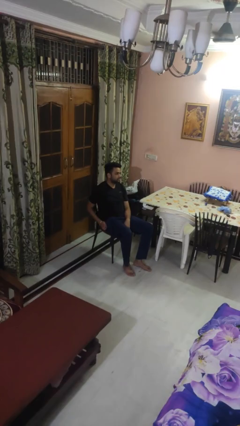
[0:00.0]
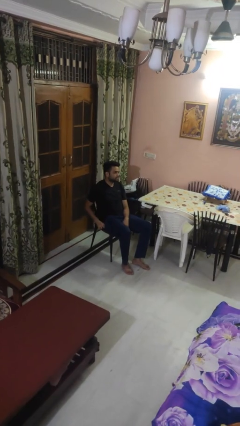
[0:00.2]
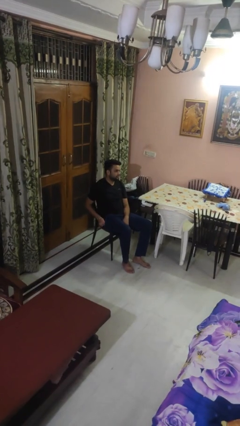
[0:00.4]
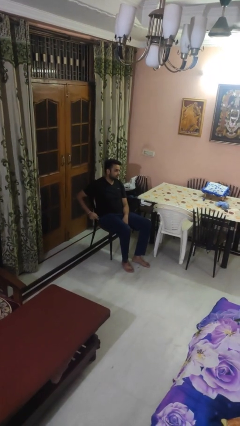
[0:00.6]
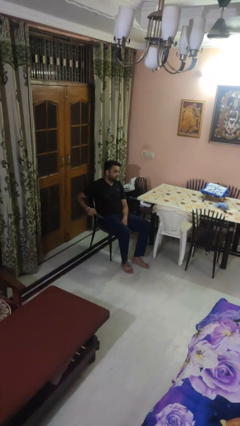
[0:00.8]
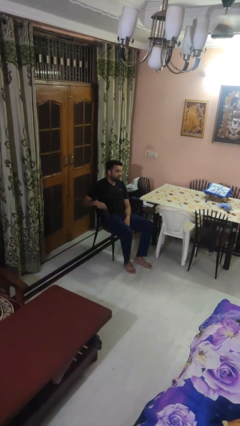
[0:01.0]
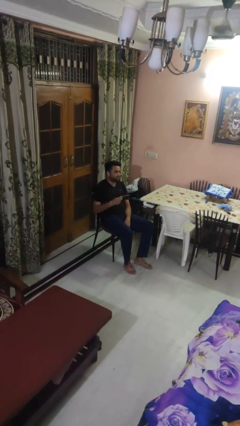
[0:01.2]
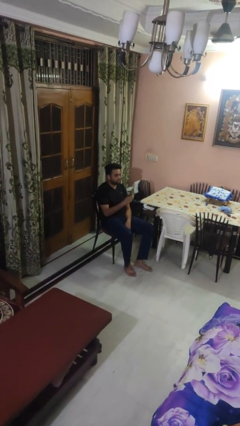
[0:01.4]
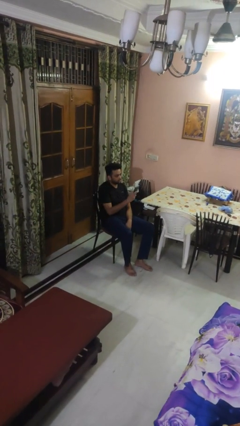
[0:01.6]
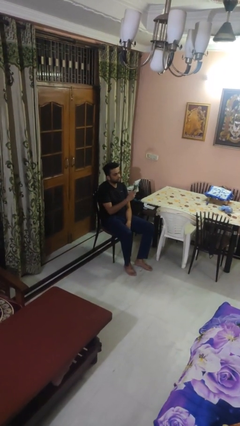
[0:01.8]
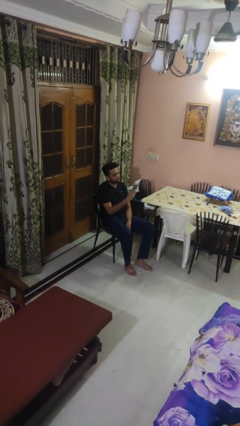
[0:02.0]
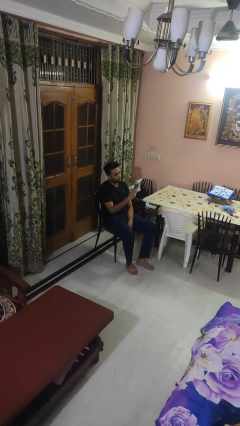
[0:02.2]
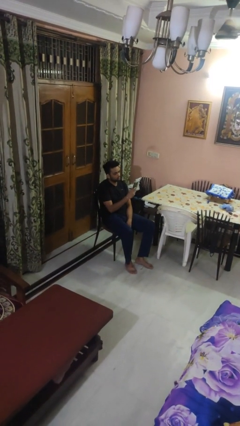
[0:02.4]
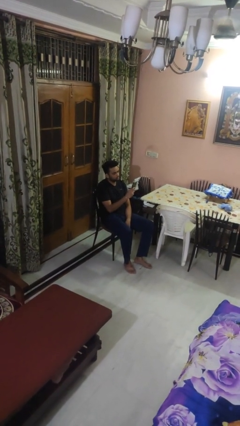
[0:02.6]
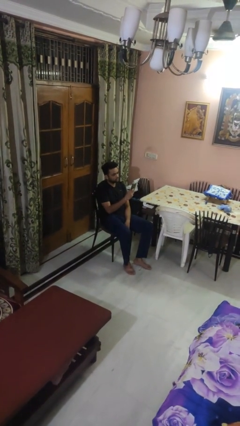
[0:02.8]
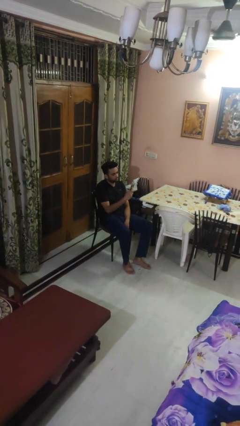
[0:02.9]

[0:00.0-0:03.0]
person takes phone from pocket

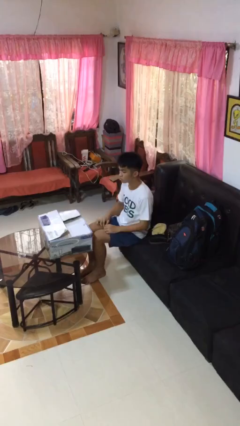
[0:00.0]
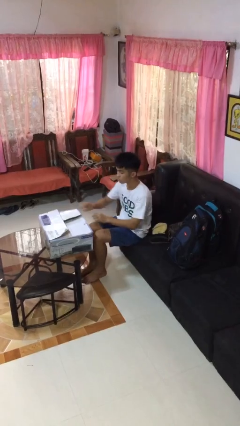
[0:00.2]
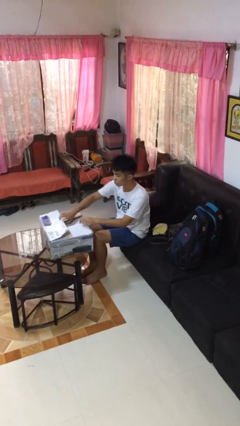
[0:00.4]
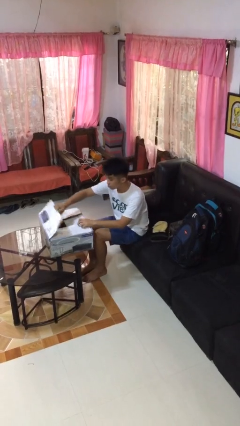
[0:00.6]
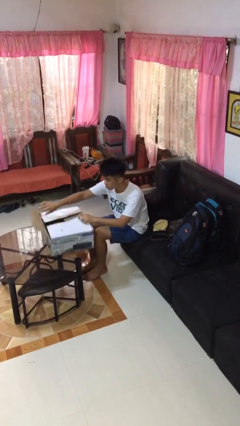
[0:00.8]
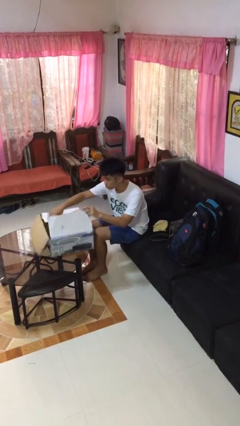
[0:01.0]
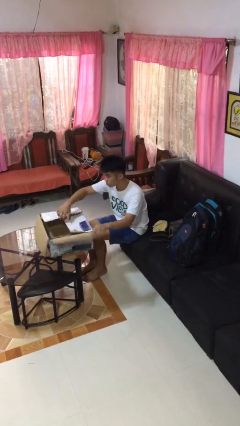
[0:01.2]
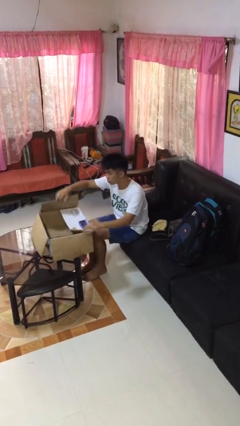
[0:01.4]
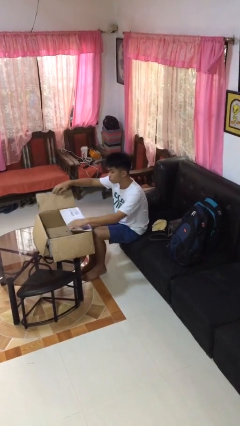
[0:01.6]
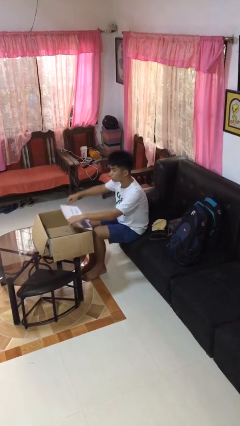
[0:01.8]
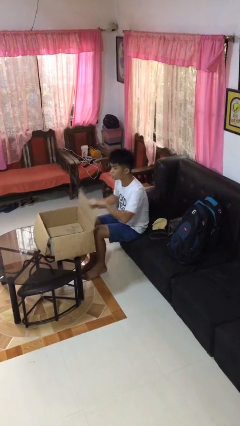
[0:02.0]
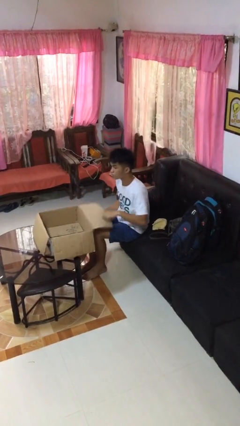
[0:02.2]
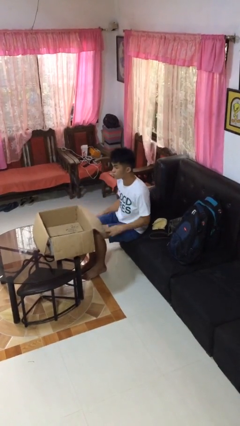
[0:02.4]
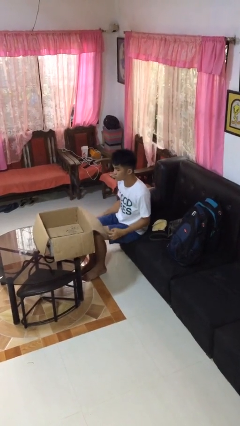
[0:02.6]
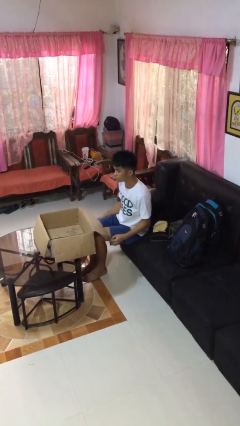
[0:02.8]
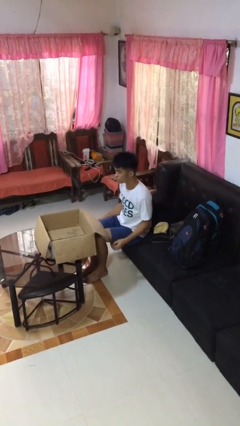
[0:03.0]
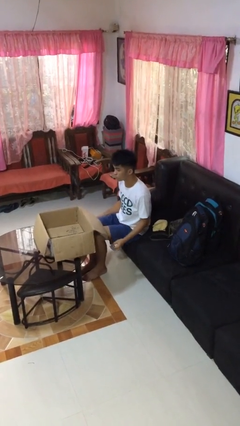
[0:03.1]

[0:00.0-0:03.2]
person opens box

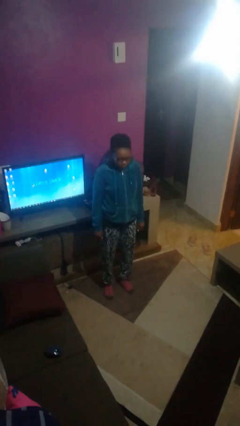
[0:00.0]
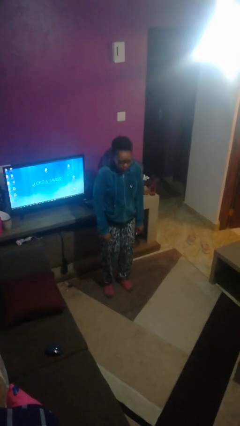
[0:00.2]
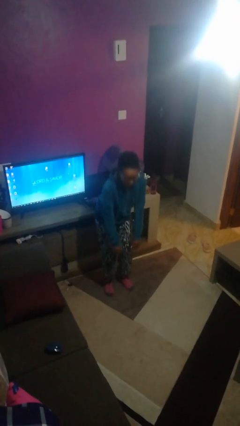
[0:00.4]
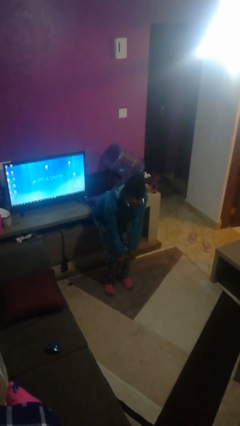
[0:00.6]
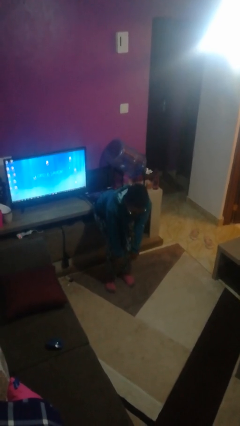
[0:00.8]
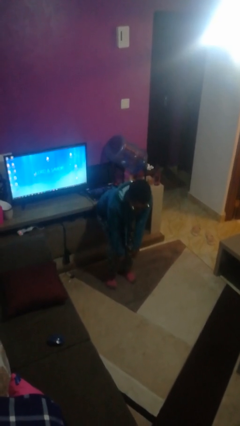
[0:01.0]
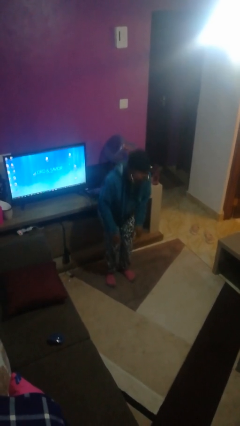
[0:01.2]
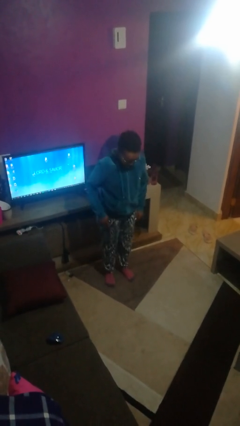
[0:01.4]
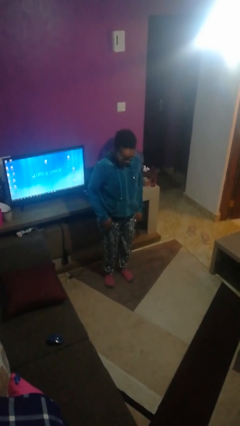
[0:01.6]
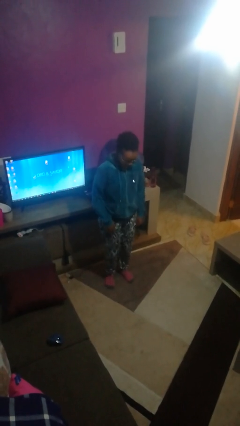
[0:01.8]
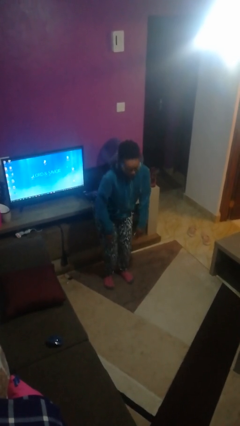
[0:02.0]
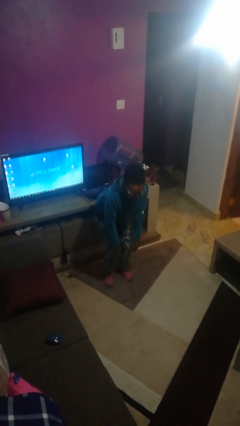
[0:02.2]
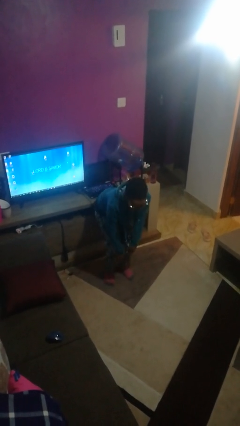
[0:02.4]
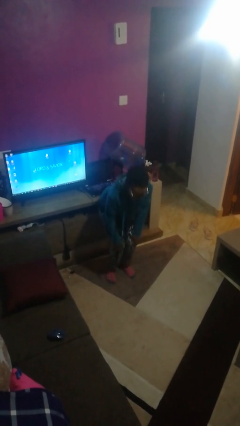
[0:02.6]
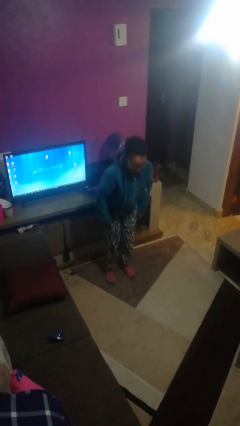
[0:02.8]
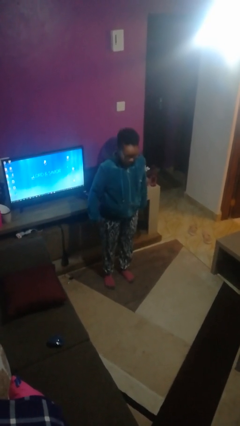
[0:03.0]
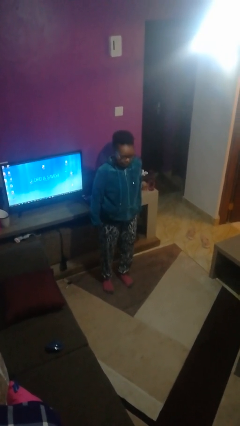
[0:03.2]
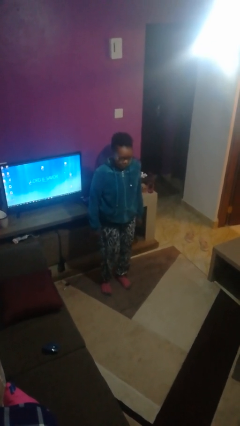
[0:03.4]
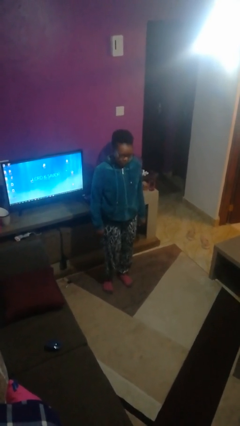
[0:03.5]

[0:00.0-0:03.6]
person dances in place

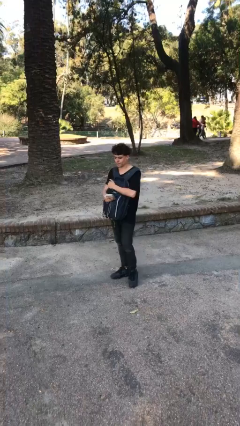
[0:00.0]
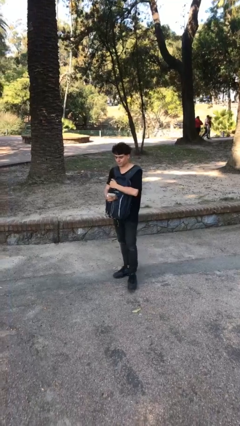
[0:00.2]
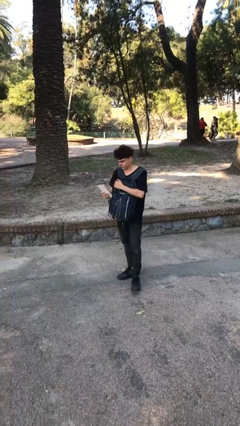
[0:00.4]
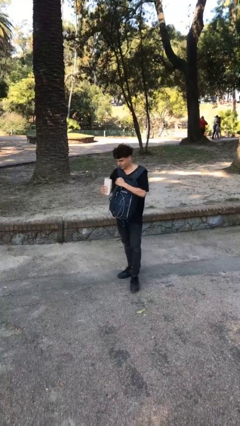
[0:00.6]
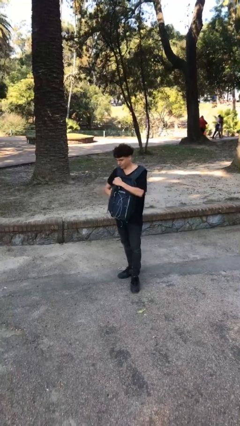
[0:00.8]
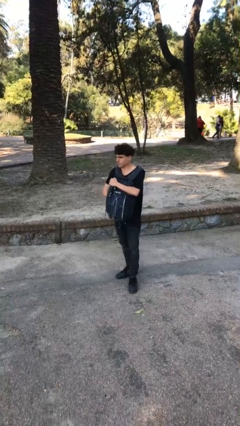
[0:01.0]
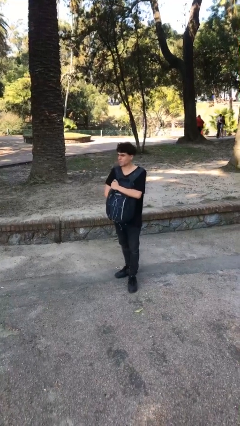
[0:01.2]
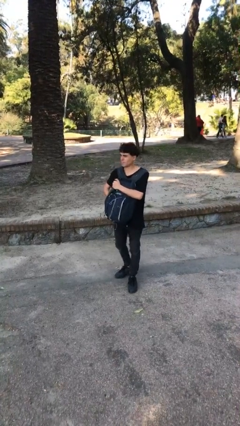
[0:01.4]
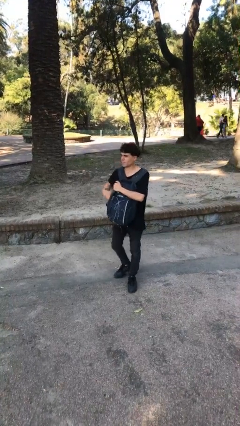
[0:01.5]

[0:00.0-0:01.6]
person puts object into backpack

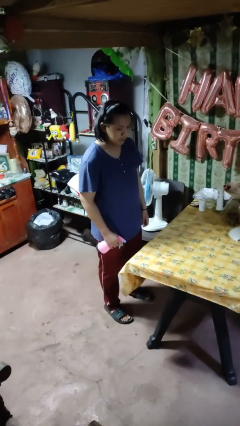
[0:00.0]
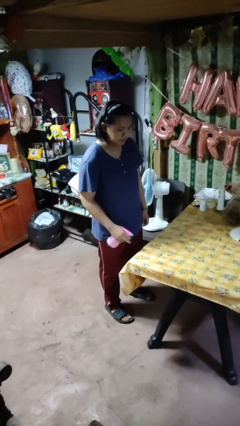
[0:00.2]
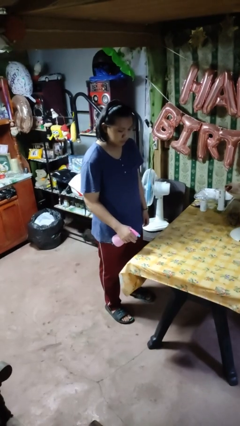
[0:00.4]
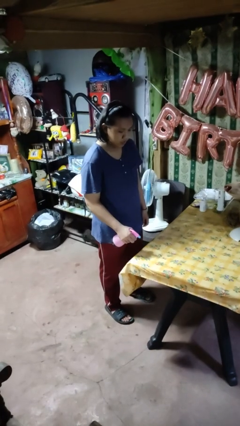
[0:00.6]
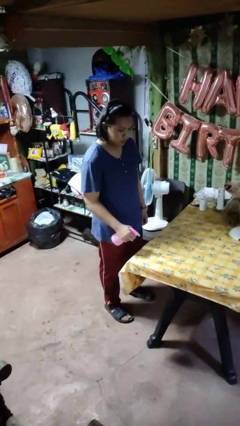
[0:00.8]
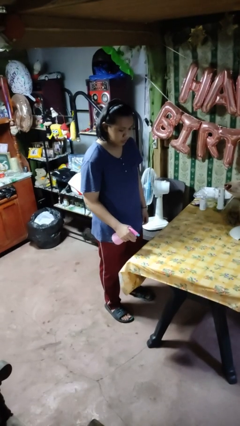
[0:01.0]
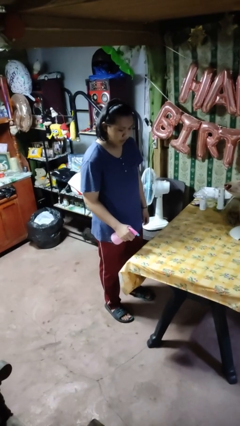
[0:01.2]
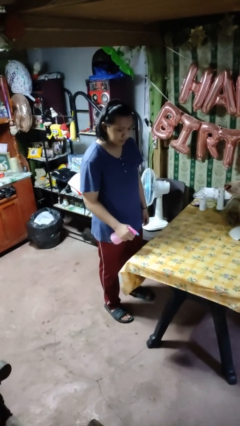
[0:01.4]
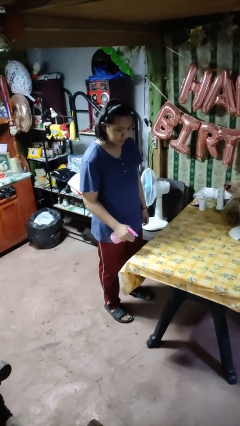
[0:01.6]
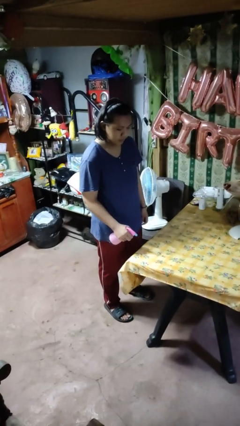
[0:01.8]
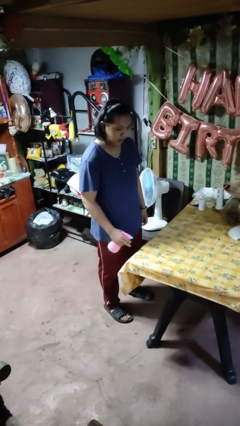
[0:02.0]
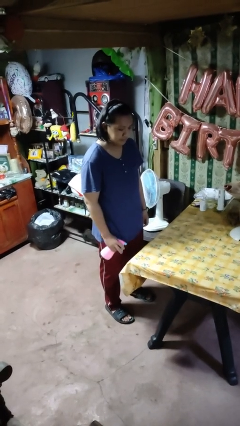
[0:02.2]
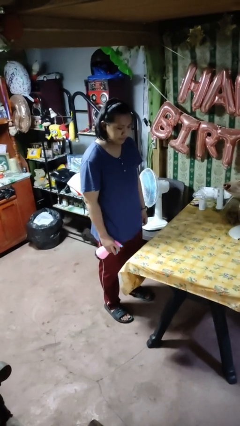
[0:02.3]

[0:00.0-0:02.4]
person sprays from bottle

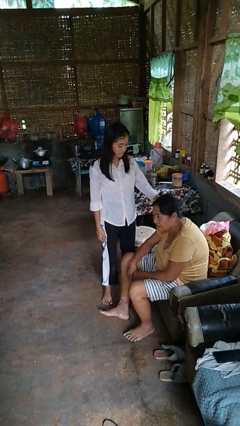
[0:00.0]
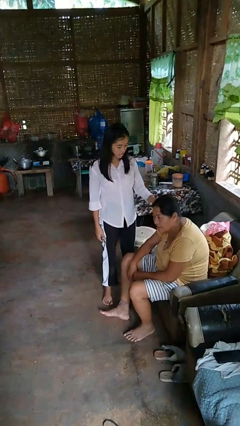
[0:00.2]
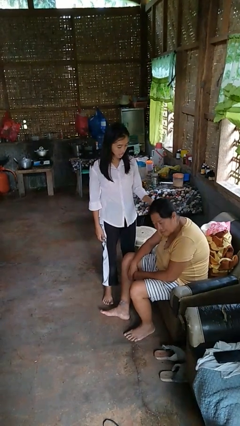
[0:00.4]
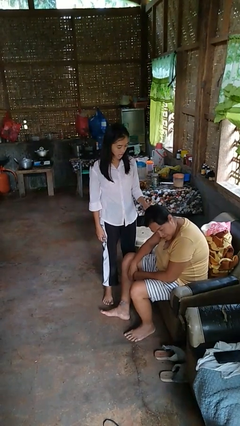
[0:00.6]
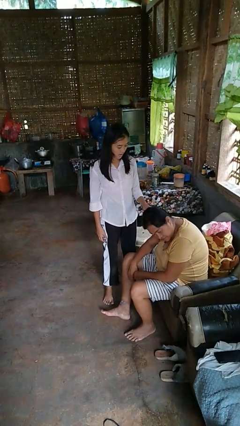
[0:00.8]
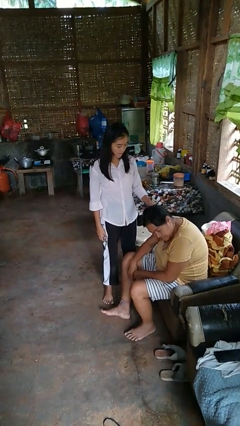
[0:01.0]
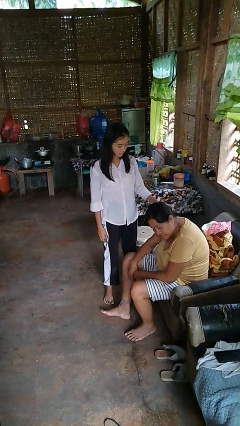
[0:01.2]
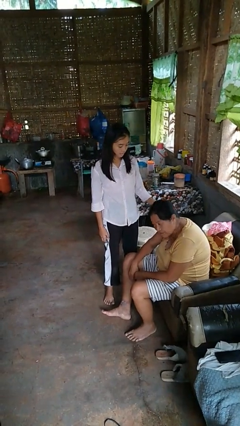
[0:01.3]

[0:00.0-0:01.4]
person grabs person by hair

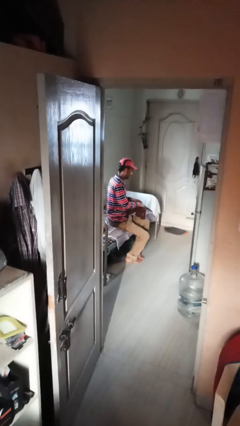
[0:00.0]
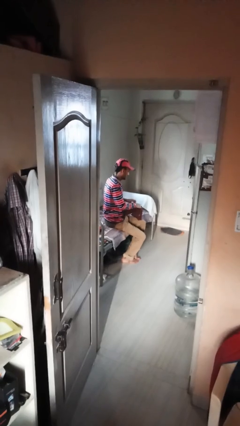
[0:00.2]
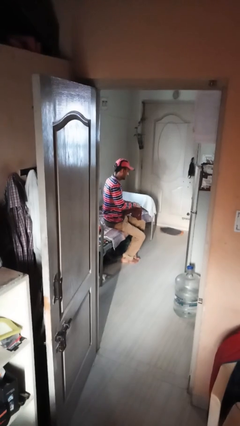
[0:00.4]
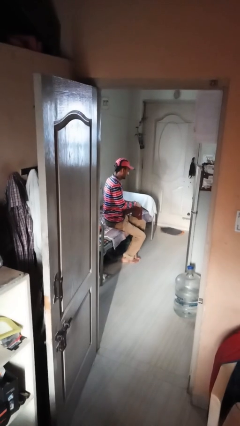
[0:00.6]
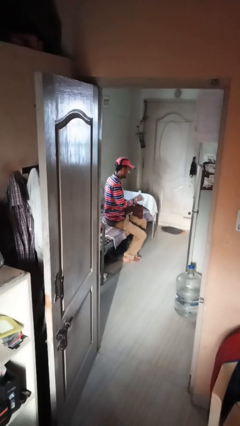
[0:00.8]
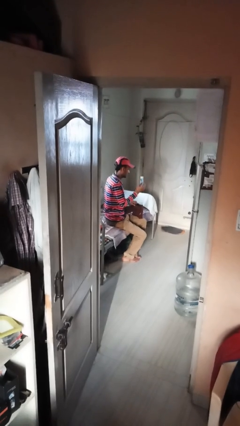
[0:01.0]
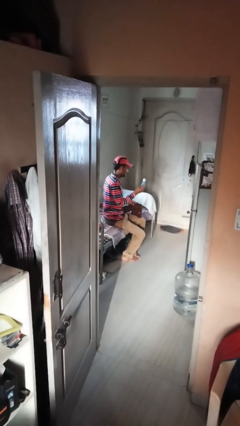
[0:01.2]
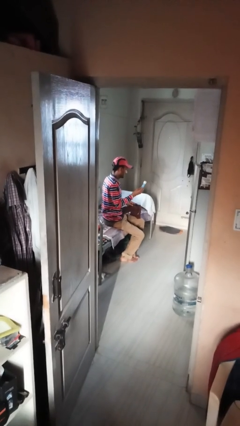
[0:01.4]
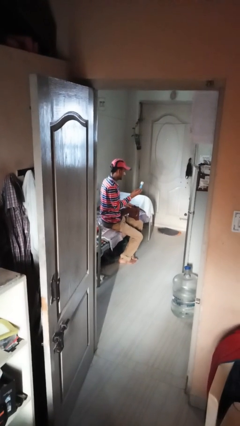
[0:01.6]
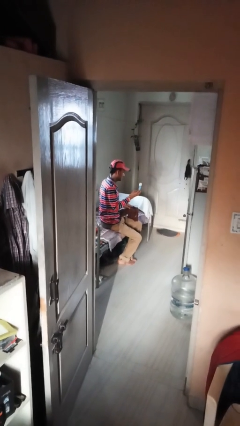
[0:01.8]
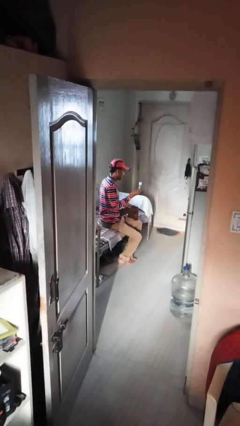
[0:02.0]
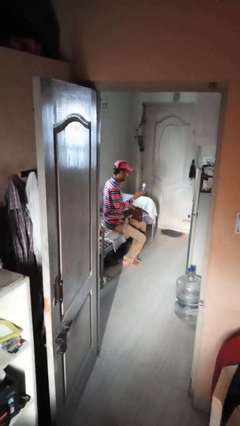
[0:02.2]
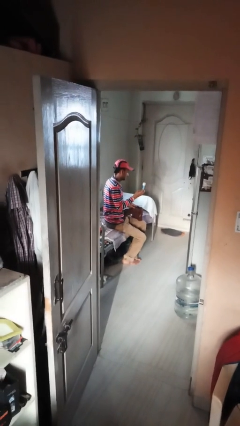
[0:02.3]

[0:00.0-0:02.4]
person takes object from purse
